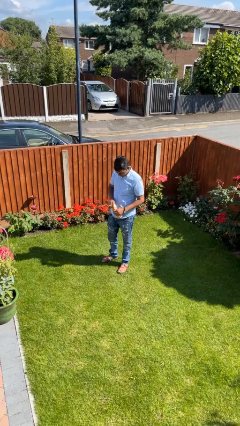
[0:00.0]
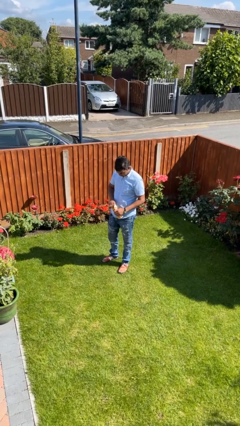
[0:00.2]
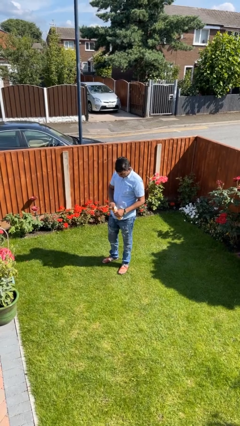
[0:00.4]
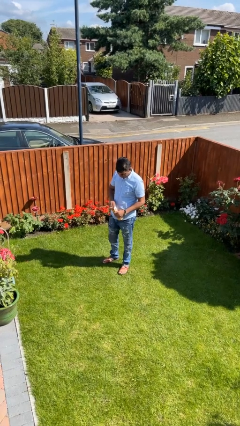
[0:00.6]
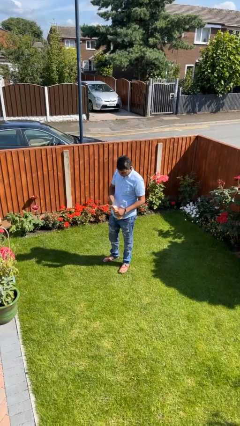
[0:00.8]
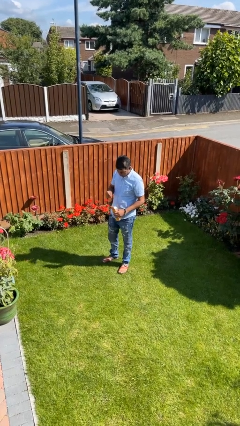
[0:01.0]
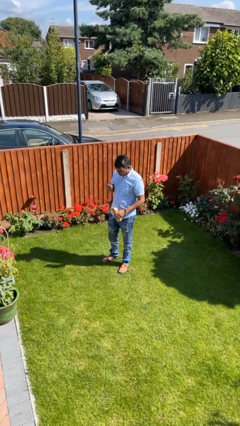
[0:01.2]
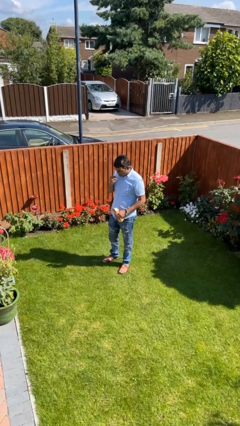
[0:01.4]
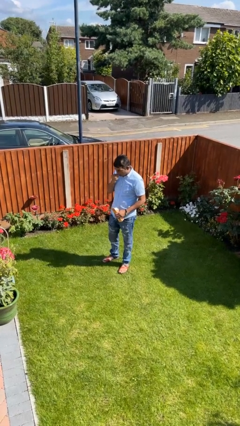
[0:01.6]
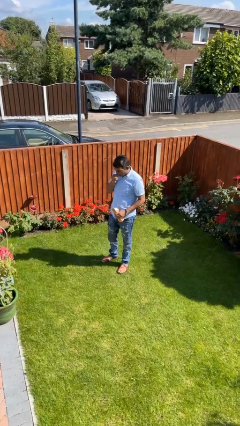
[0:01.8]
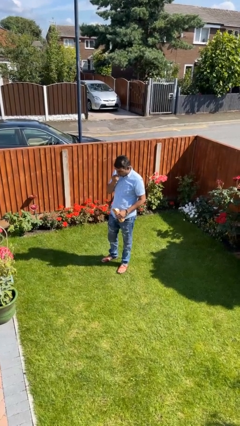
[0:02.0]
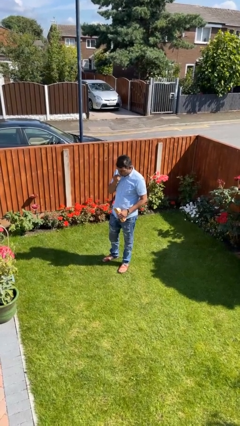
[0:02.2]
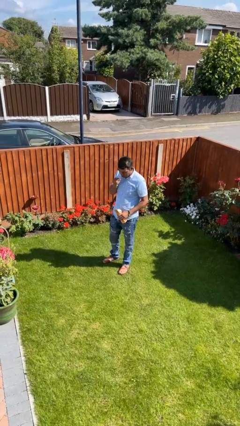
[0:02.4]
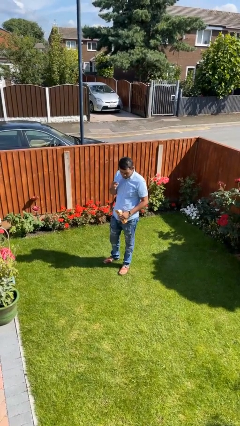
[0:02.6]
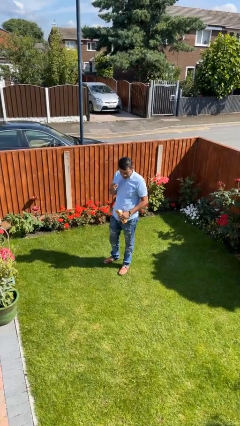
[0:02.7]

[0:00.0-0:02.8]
person eats snack from bag

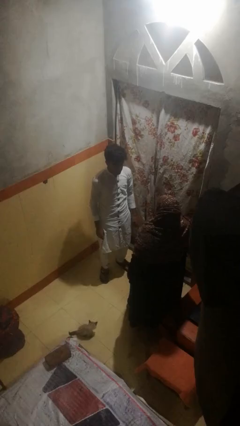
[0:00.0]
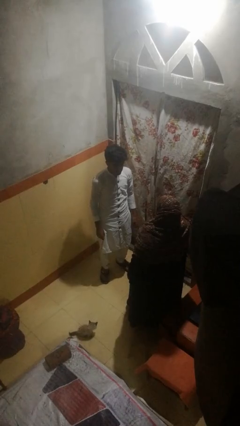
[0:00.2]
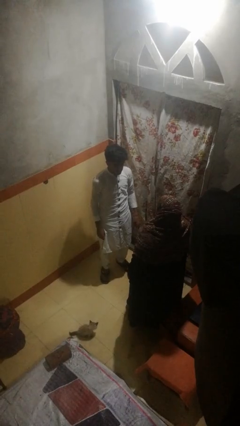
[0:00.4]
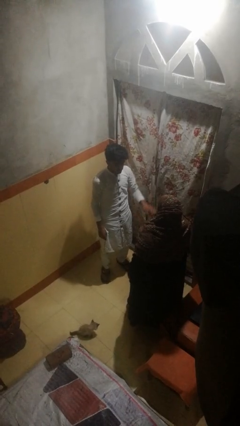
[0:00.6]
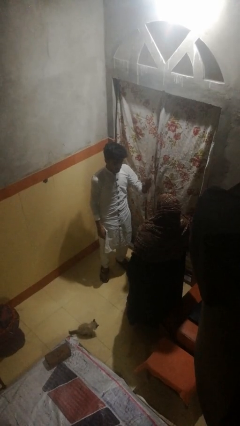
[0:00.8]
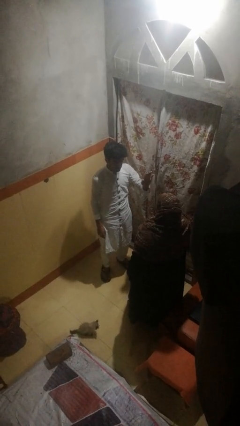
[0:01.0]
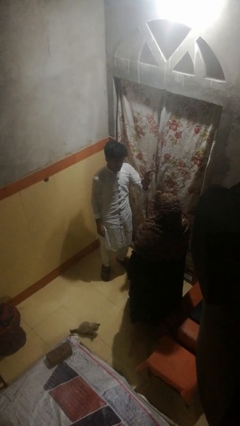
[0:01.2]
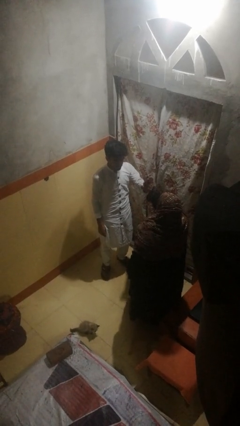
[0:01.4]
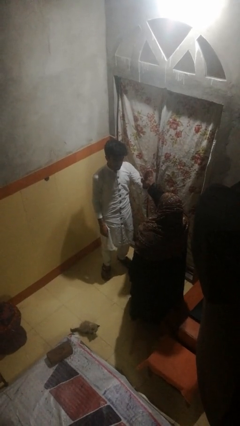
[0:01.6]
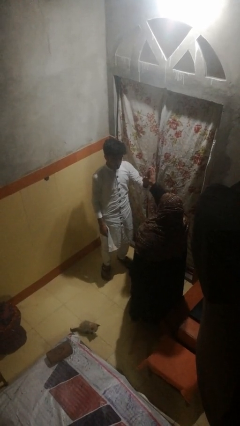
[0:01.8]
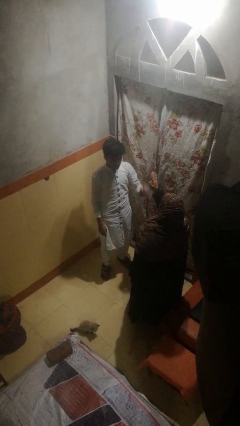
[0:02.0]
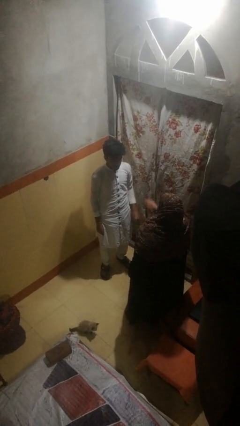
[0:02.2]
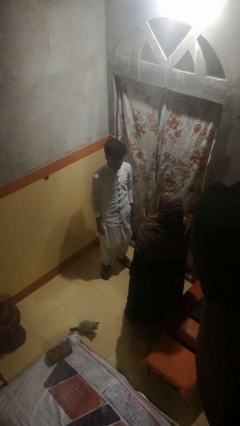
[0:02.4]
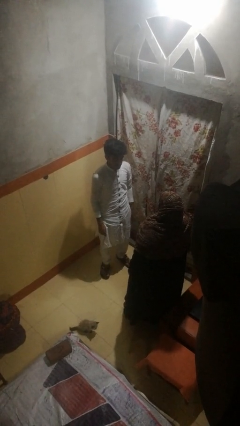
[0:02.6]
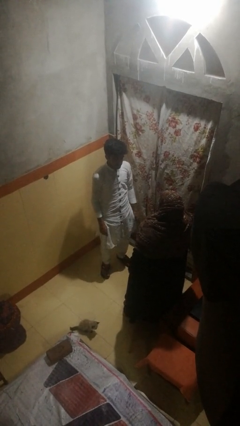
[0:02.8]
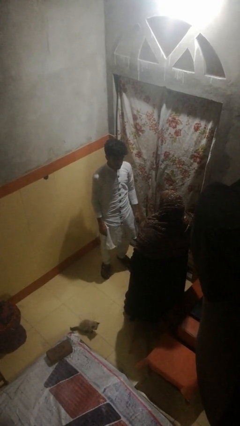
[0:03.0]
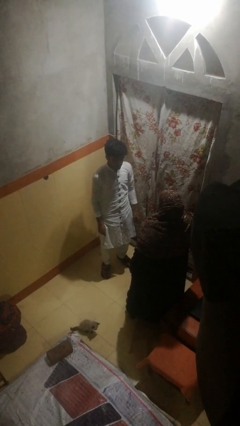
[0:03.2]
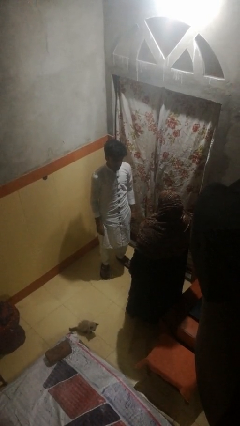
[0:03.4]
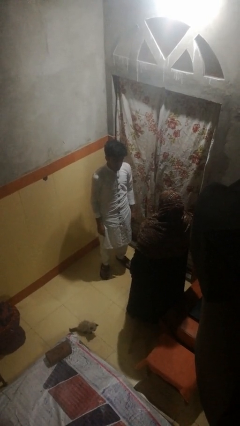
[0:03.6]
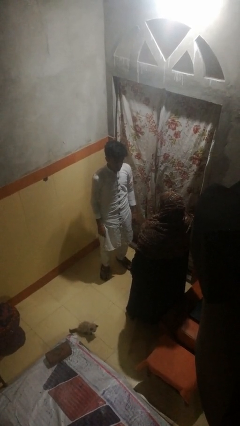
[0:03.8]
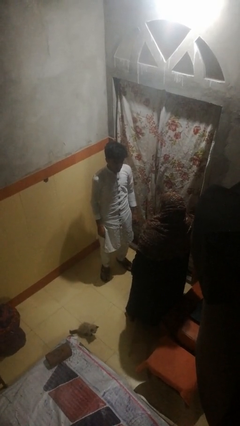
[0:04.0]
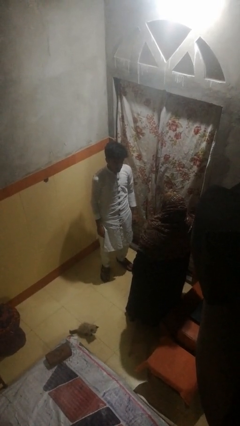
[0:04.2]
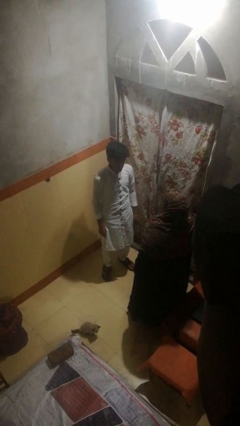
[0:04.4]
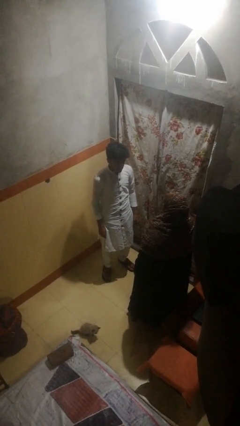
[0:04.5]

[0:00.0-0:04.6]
person highfives hand

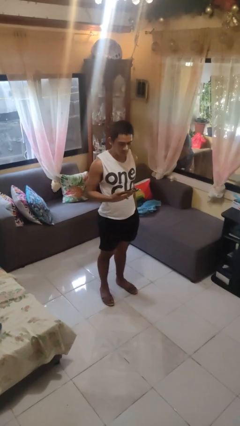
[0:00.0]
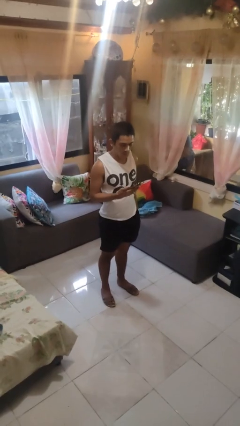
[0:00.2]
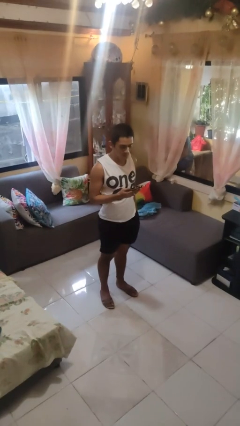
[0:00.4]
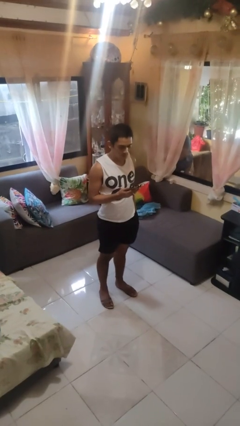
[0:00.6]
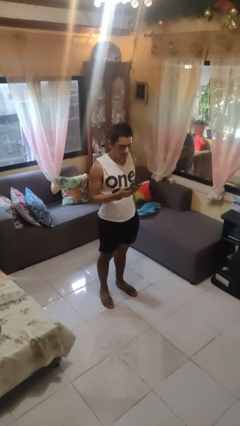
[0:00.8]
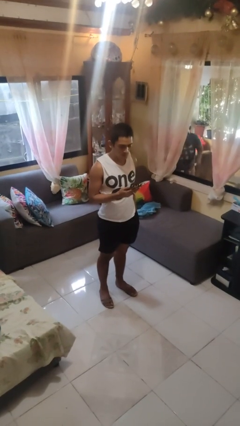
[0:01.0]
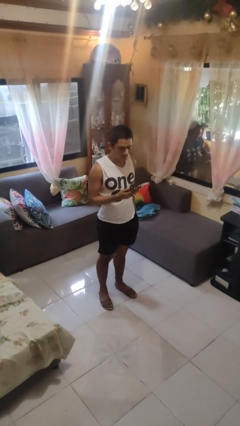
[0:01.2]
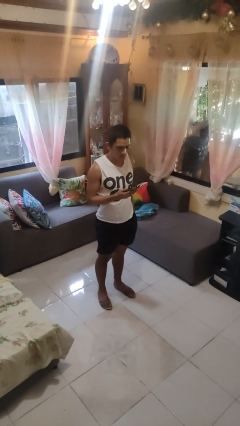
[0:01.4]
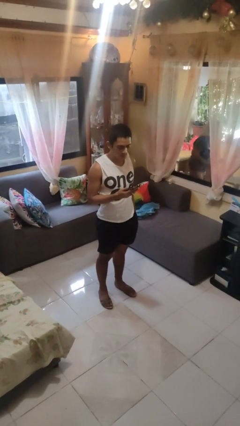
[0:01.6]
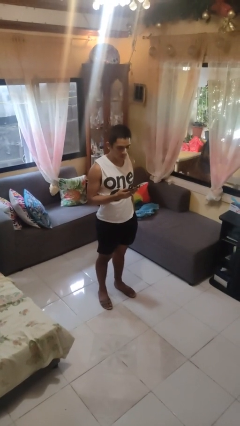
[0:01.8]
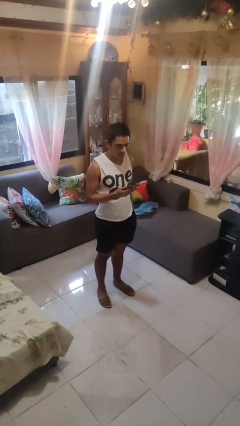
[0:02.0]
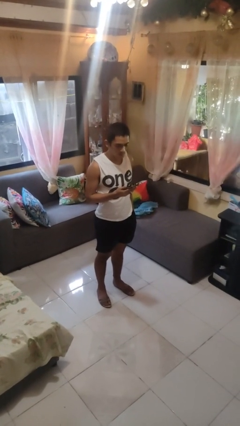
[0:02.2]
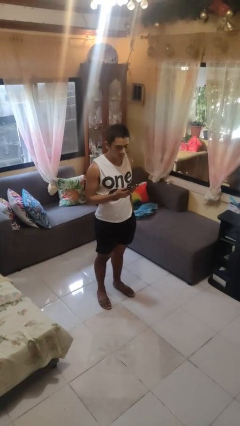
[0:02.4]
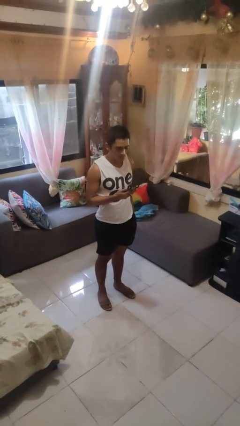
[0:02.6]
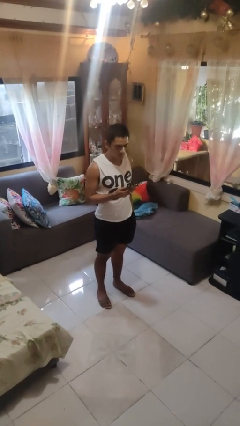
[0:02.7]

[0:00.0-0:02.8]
person takes phone from pocket

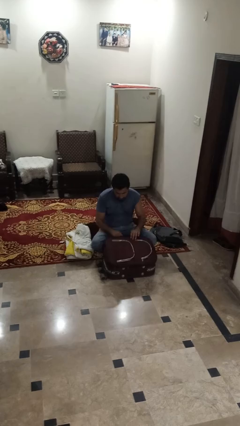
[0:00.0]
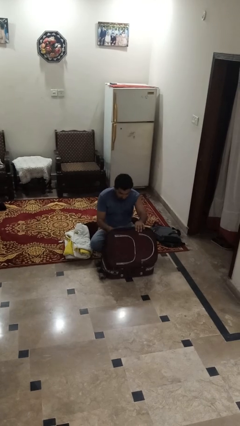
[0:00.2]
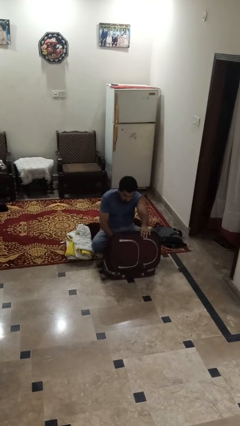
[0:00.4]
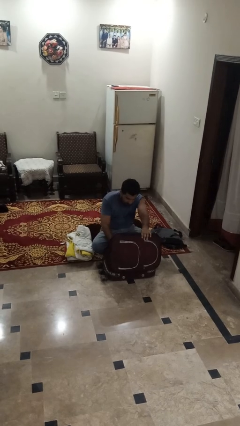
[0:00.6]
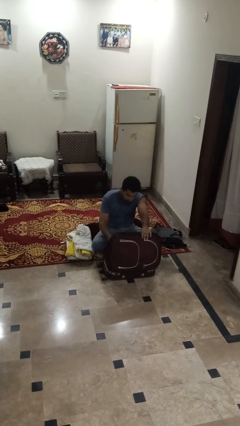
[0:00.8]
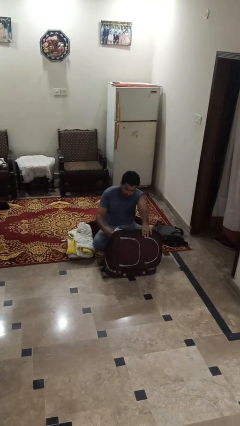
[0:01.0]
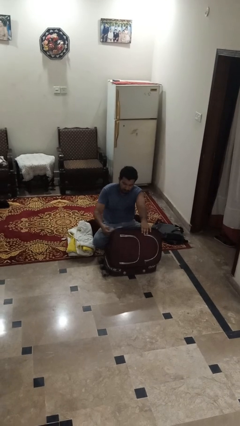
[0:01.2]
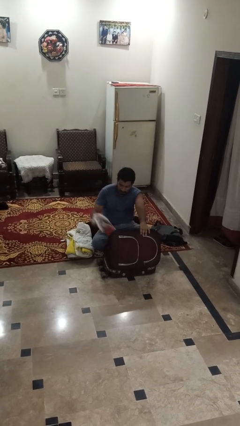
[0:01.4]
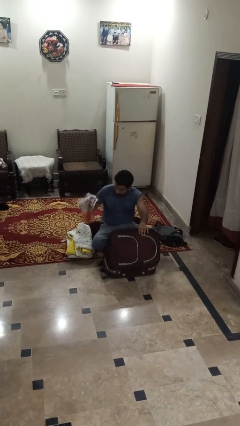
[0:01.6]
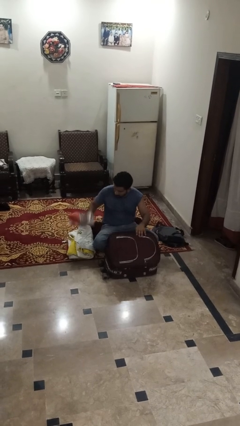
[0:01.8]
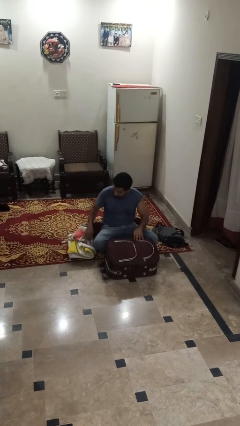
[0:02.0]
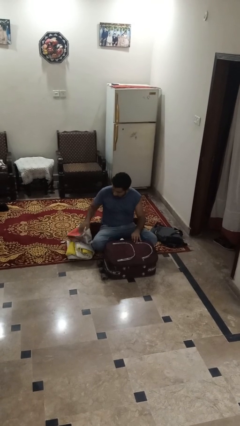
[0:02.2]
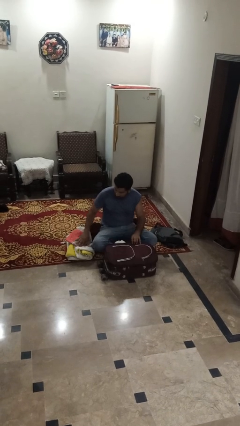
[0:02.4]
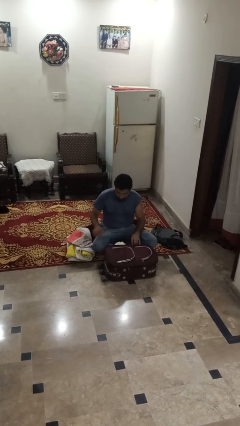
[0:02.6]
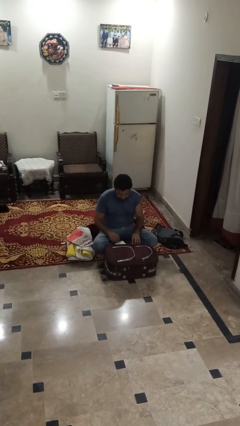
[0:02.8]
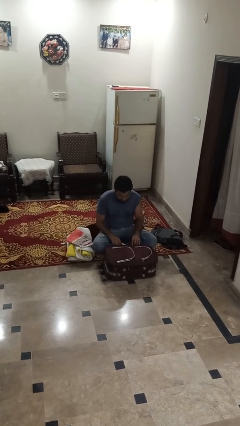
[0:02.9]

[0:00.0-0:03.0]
person unloads clothes from suitcase

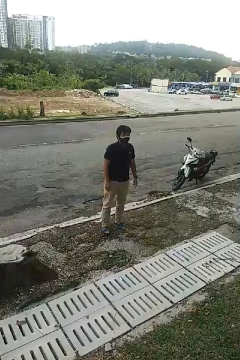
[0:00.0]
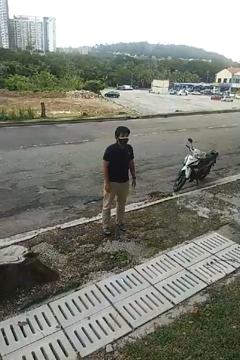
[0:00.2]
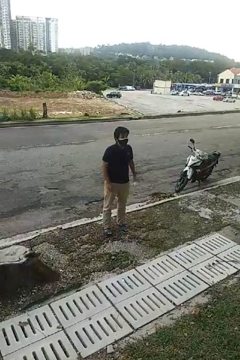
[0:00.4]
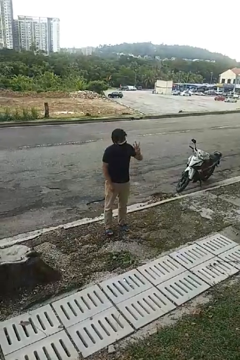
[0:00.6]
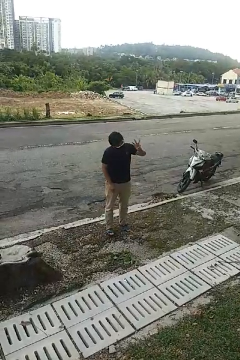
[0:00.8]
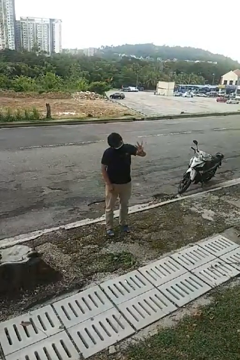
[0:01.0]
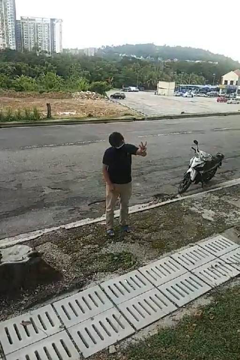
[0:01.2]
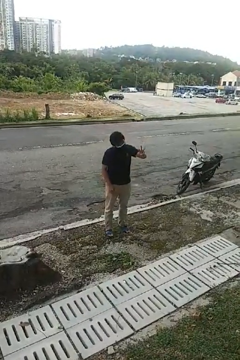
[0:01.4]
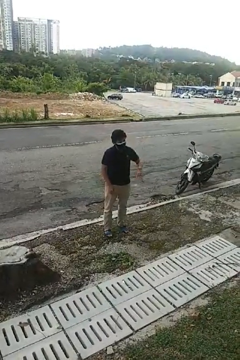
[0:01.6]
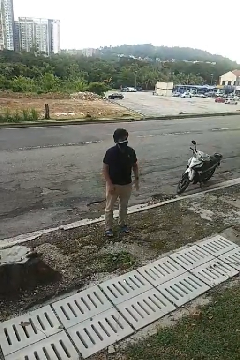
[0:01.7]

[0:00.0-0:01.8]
person gestures number three

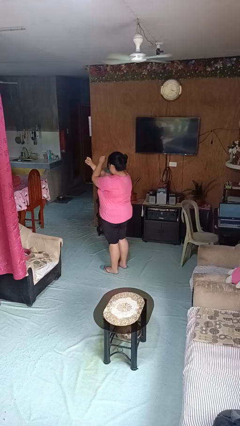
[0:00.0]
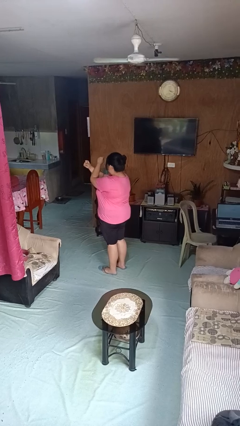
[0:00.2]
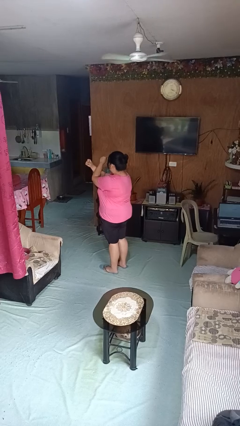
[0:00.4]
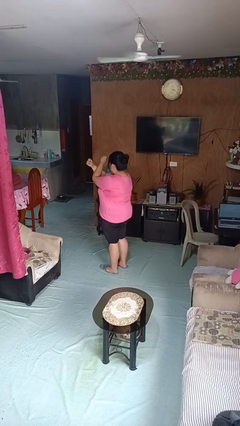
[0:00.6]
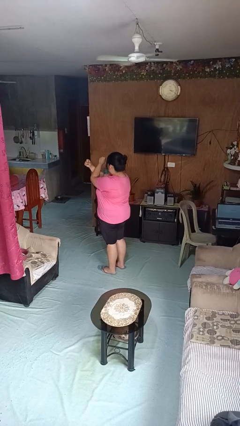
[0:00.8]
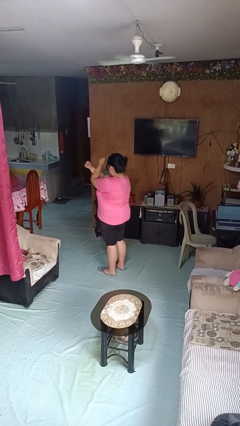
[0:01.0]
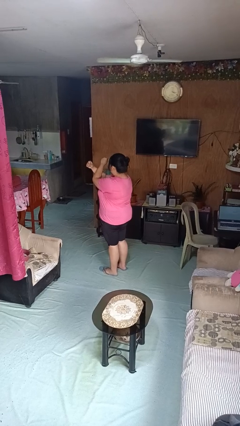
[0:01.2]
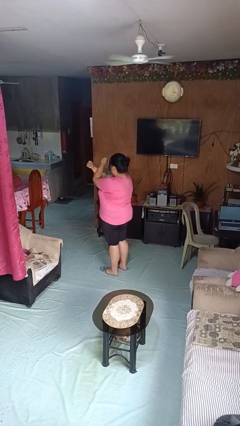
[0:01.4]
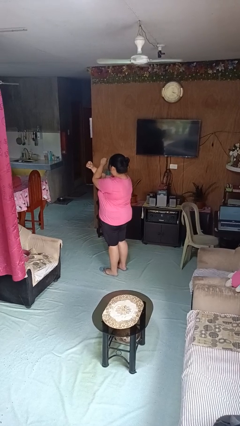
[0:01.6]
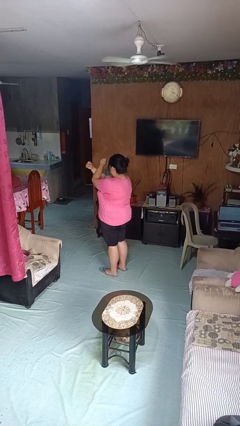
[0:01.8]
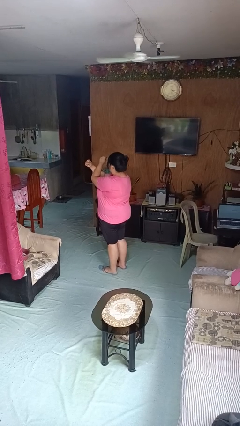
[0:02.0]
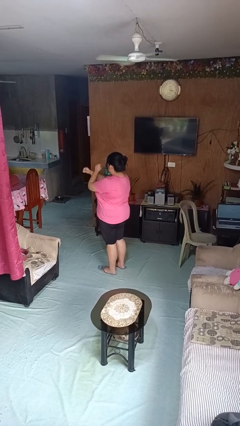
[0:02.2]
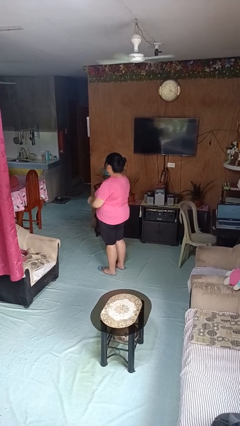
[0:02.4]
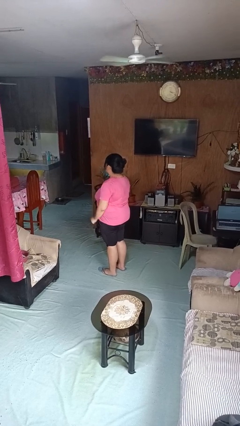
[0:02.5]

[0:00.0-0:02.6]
person gestures arms x
